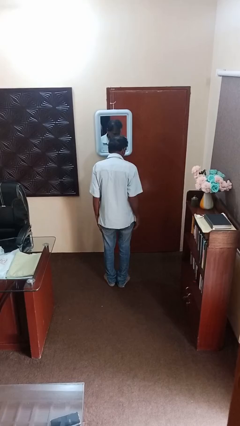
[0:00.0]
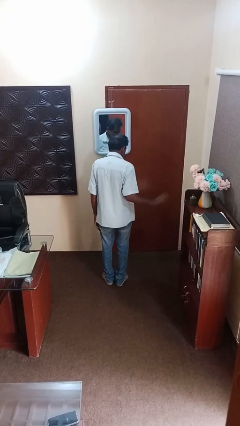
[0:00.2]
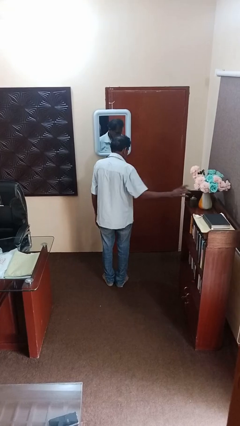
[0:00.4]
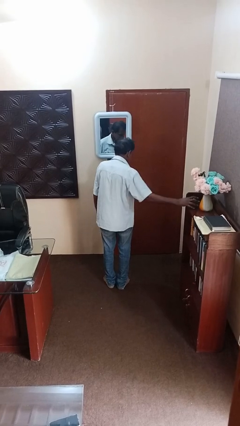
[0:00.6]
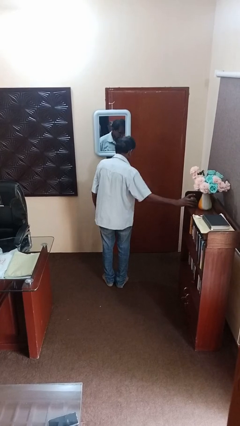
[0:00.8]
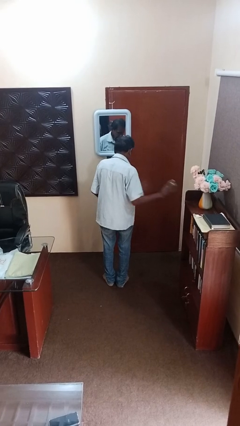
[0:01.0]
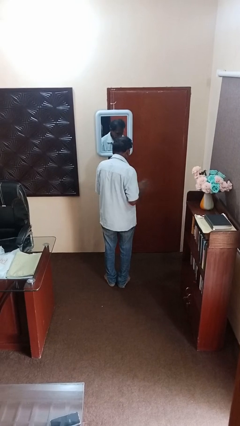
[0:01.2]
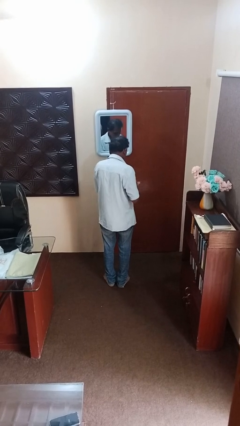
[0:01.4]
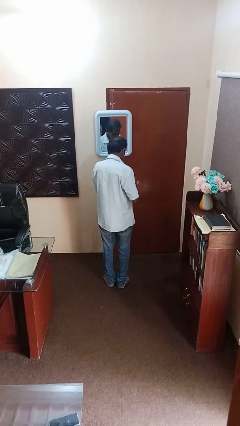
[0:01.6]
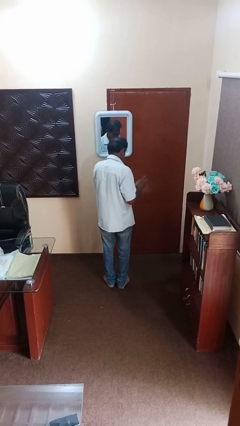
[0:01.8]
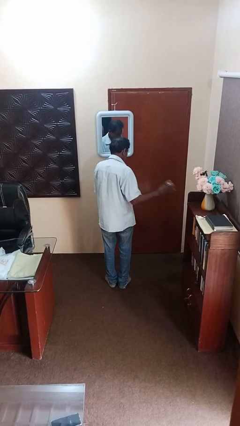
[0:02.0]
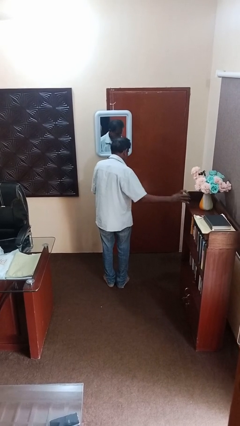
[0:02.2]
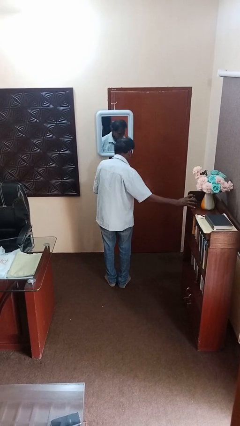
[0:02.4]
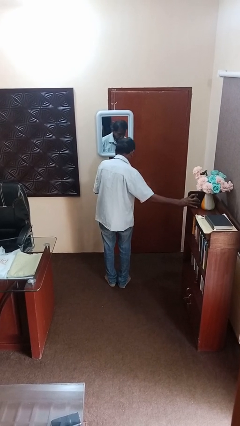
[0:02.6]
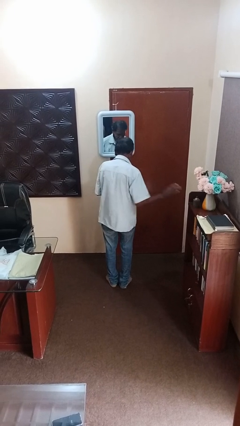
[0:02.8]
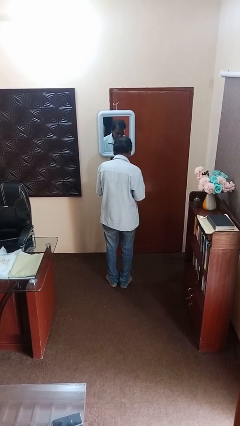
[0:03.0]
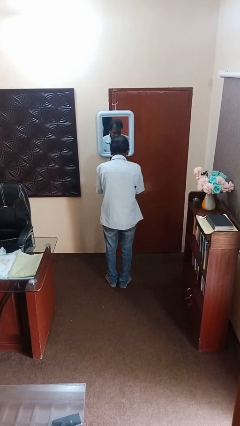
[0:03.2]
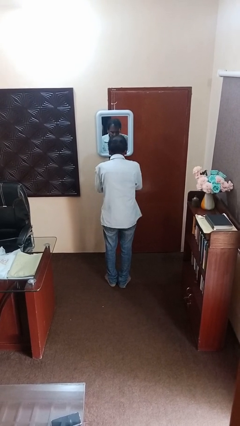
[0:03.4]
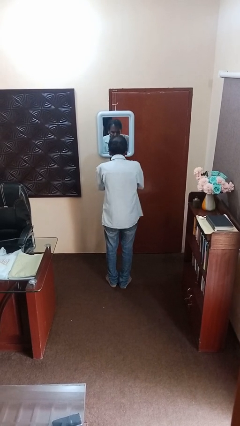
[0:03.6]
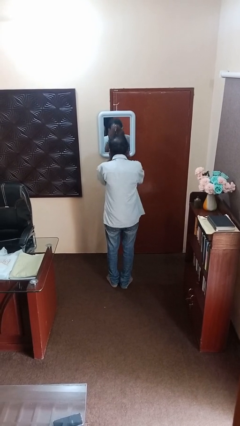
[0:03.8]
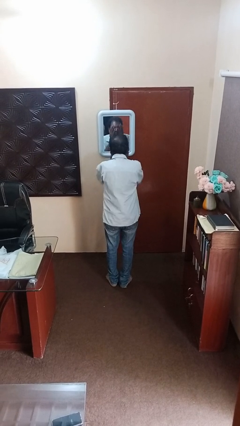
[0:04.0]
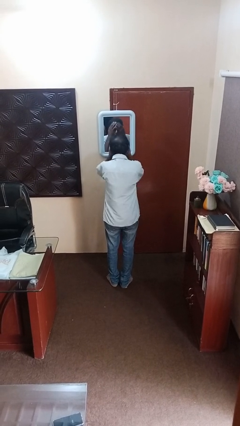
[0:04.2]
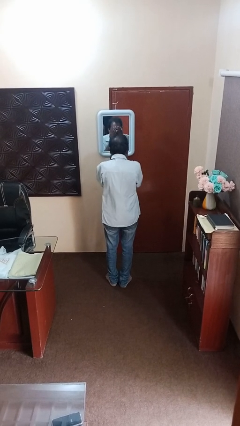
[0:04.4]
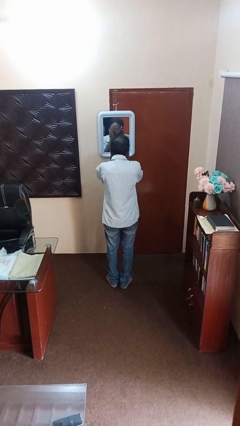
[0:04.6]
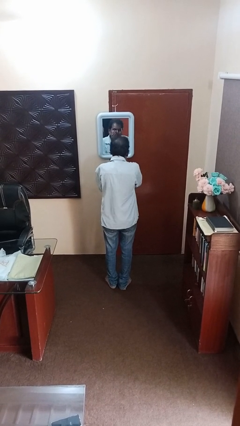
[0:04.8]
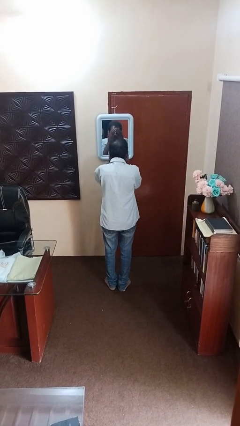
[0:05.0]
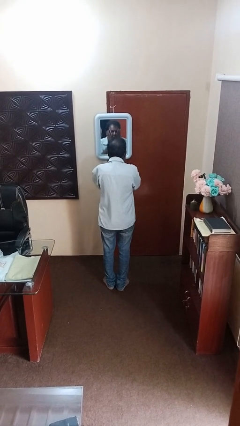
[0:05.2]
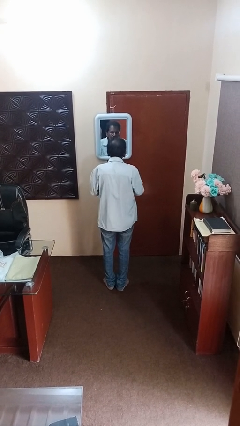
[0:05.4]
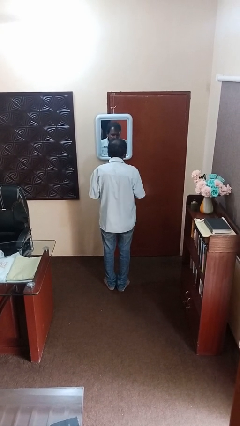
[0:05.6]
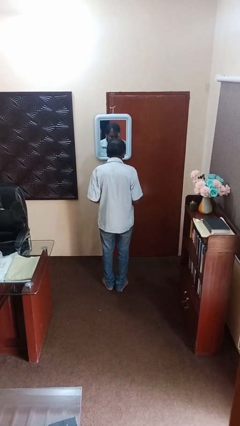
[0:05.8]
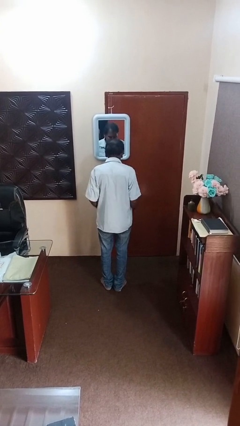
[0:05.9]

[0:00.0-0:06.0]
person applies foundation makeup

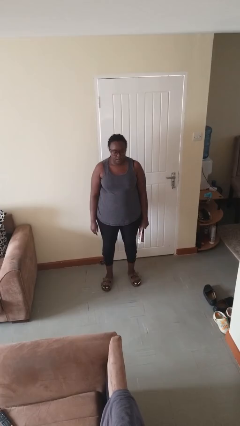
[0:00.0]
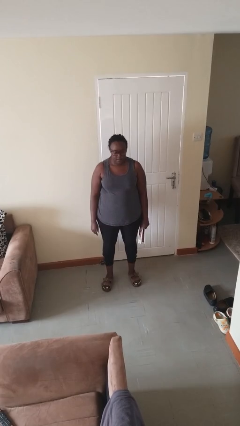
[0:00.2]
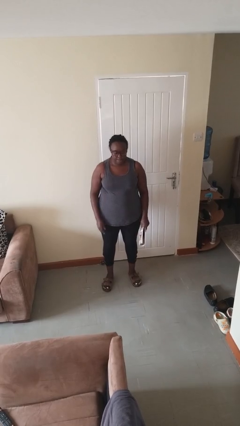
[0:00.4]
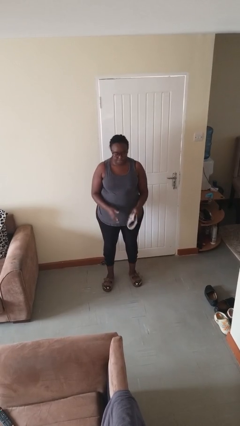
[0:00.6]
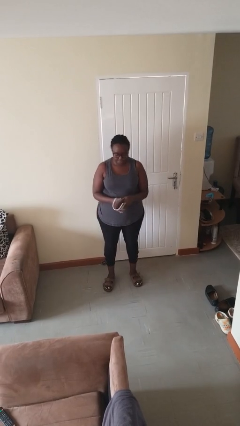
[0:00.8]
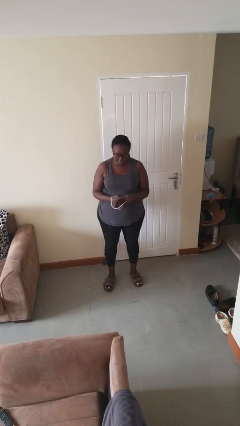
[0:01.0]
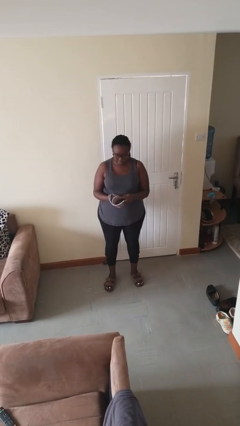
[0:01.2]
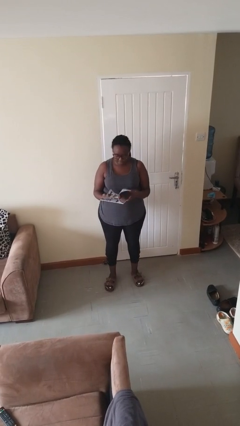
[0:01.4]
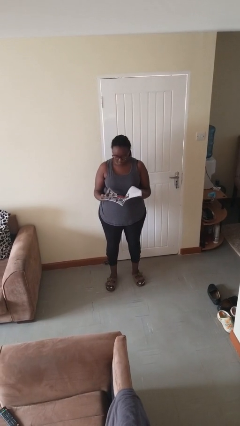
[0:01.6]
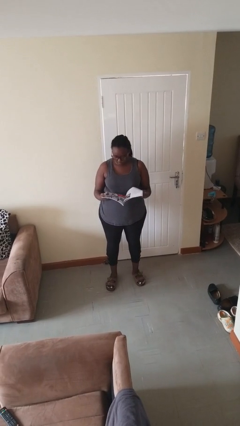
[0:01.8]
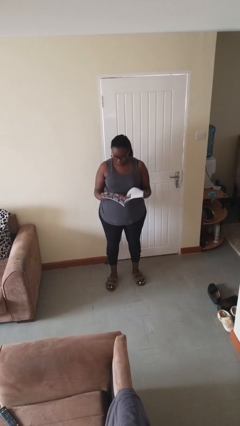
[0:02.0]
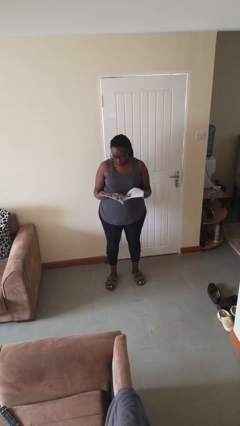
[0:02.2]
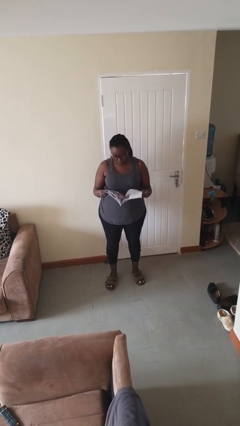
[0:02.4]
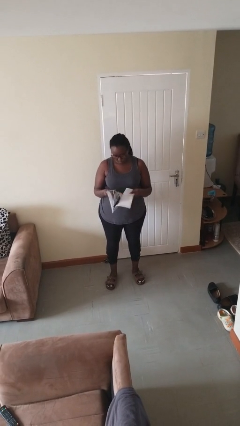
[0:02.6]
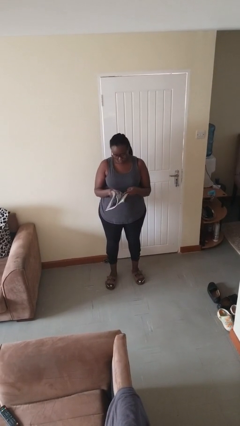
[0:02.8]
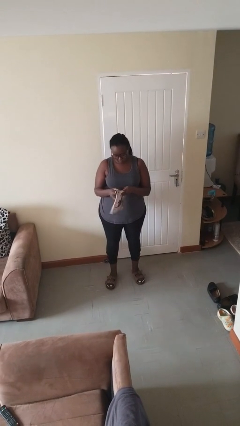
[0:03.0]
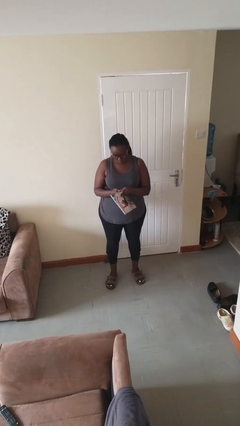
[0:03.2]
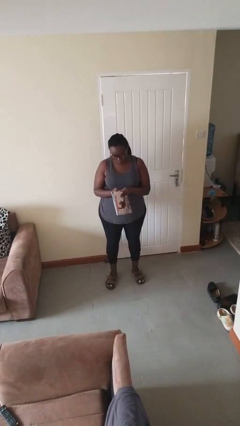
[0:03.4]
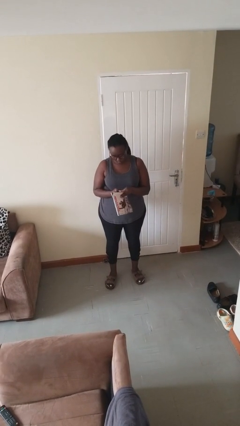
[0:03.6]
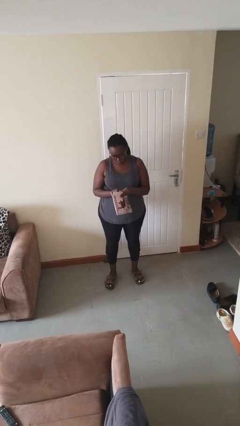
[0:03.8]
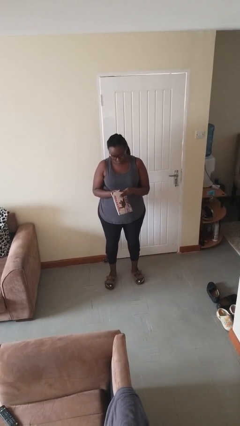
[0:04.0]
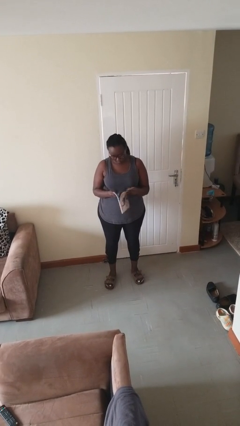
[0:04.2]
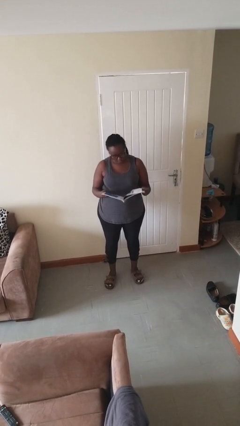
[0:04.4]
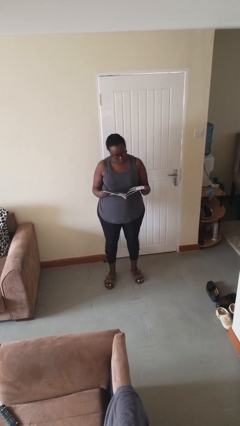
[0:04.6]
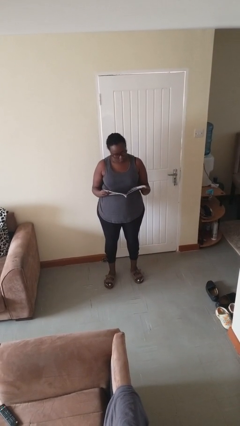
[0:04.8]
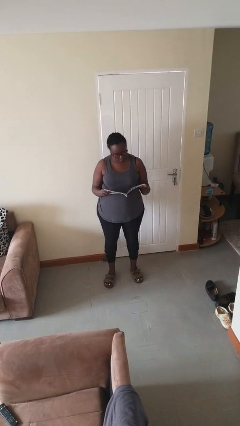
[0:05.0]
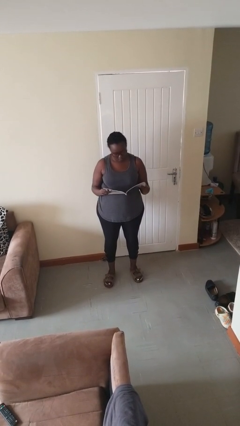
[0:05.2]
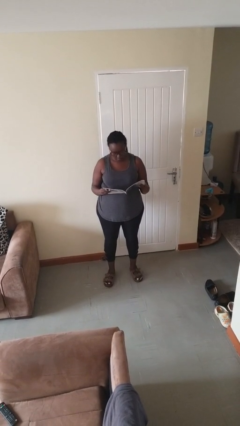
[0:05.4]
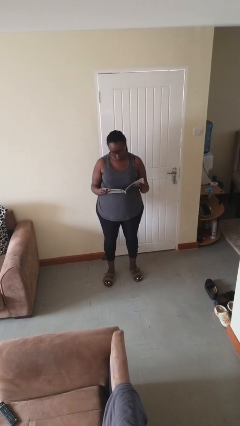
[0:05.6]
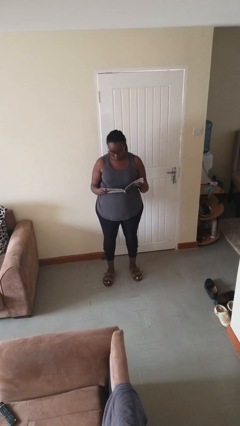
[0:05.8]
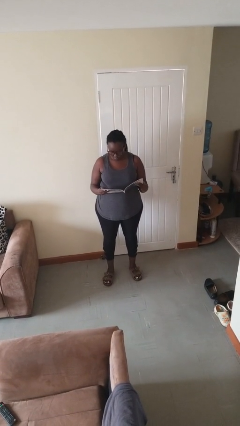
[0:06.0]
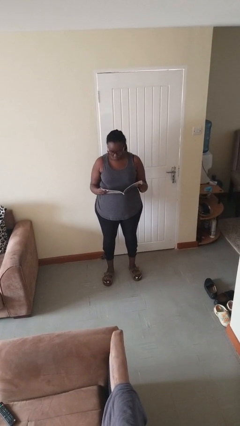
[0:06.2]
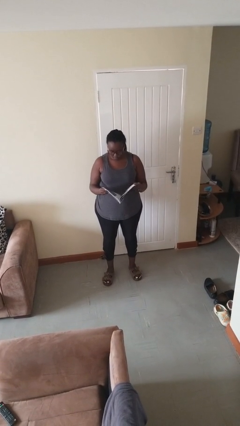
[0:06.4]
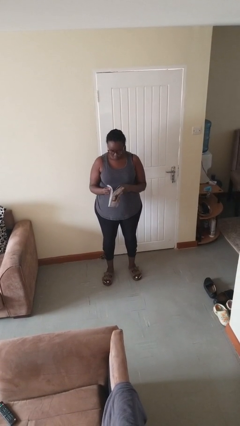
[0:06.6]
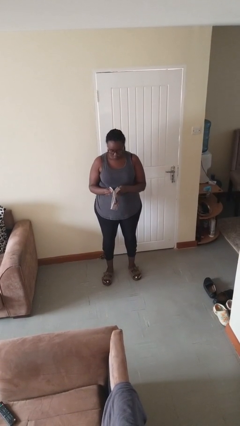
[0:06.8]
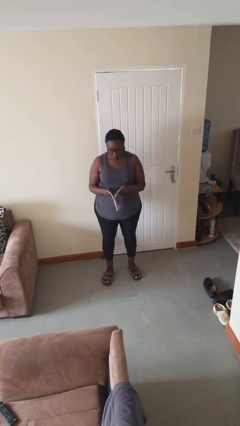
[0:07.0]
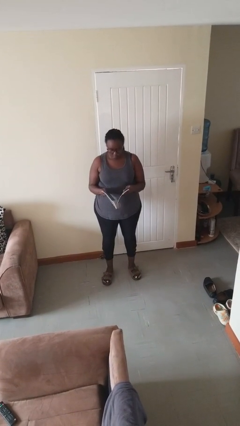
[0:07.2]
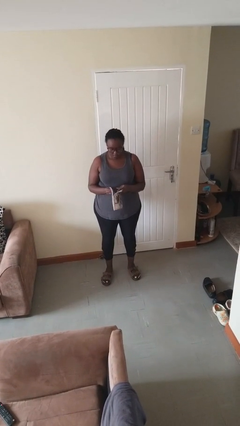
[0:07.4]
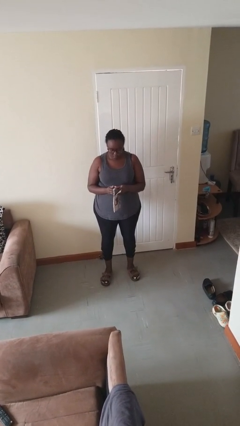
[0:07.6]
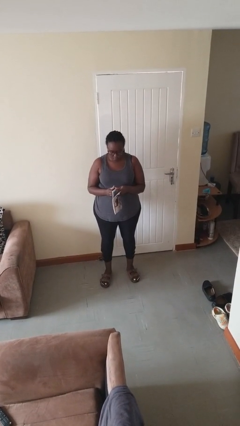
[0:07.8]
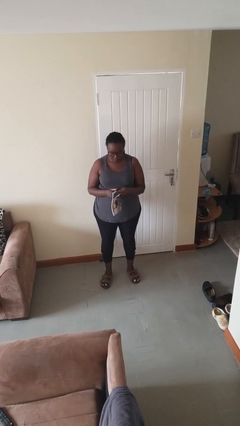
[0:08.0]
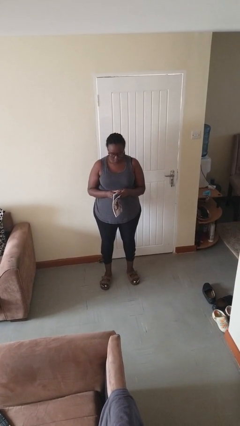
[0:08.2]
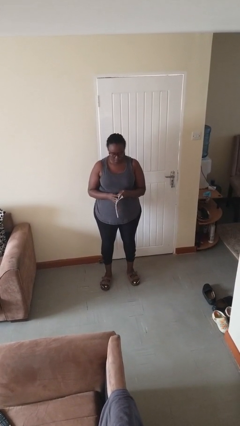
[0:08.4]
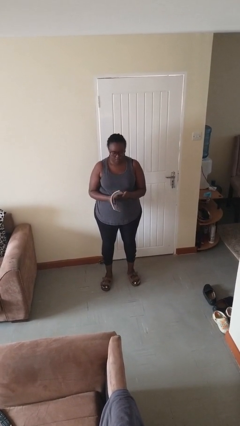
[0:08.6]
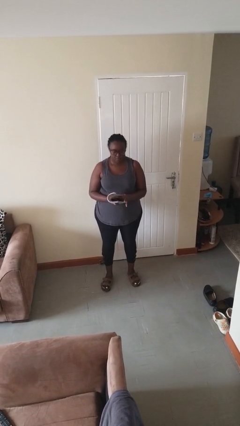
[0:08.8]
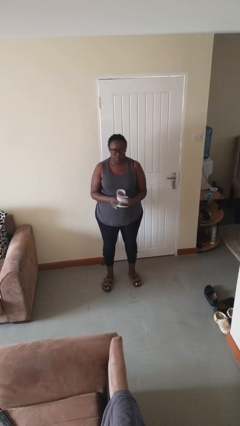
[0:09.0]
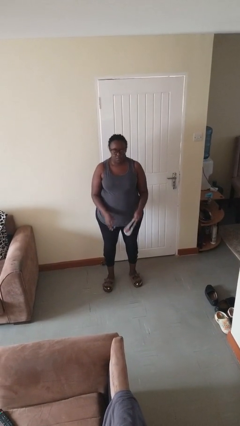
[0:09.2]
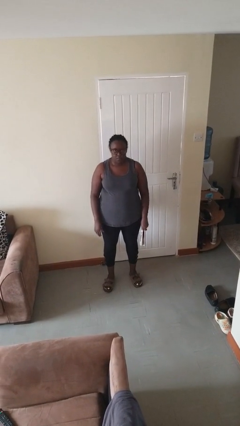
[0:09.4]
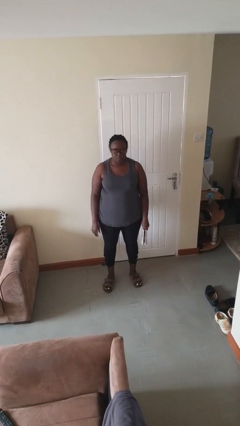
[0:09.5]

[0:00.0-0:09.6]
person reads magazine

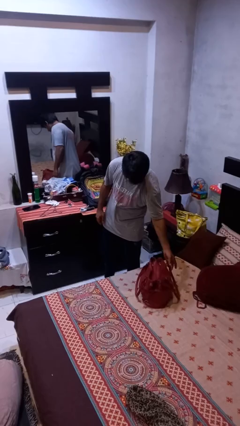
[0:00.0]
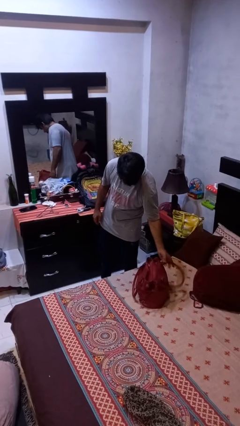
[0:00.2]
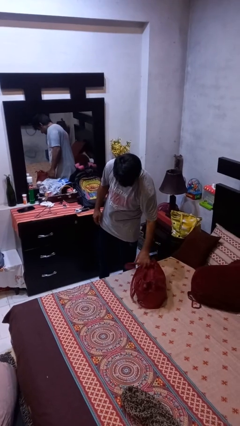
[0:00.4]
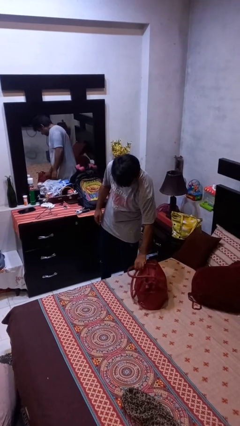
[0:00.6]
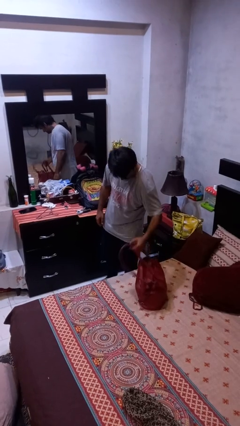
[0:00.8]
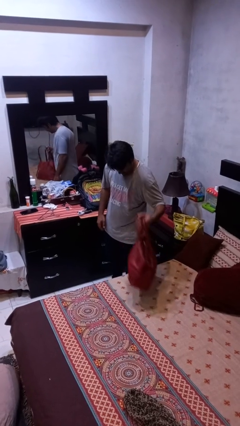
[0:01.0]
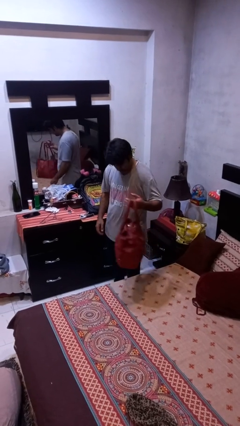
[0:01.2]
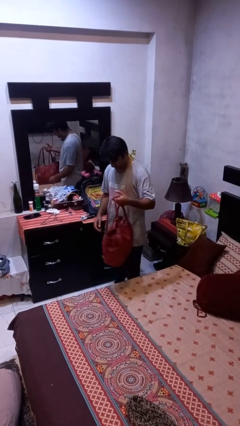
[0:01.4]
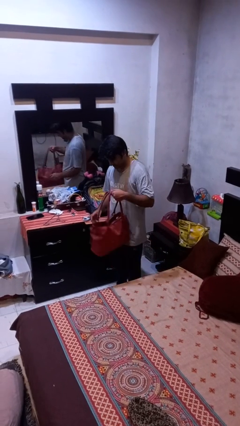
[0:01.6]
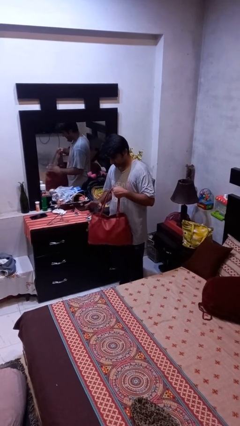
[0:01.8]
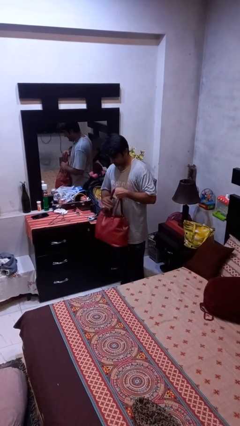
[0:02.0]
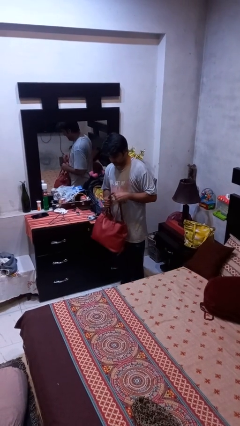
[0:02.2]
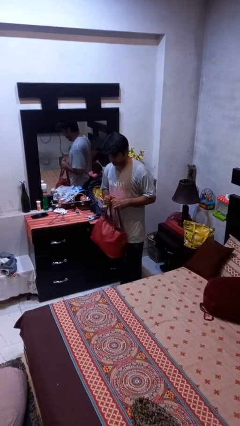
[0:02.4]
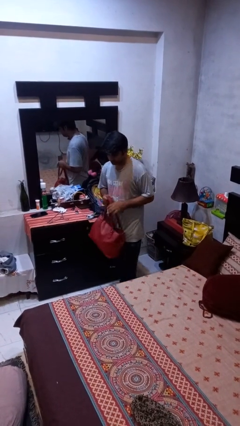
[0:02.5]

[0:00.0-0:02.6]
person picks up object from bed
